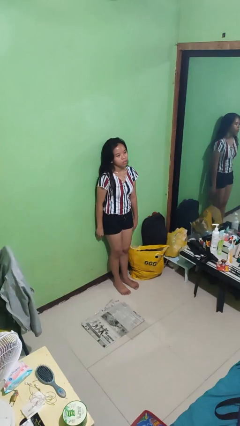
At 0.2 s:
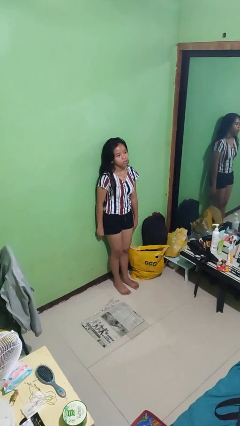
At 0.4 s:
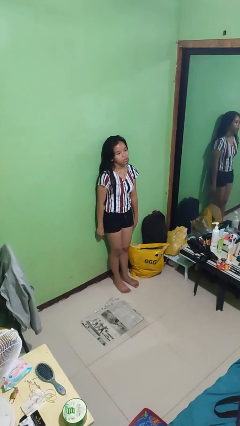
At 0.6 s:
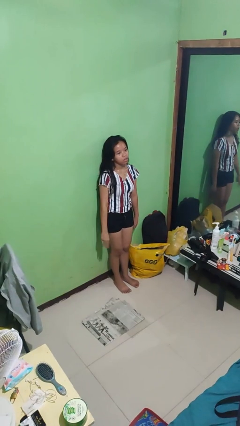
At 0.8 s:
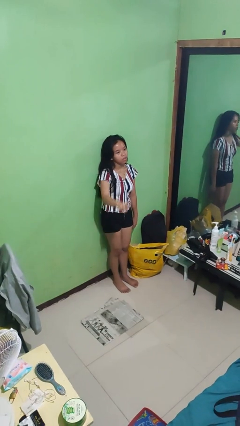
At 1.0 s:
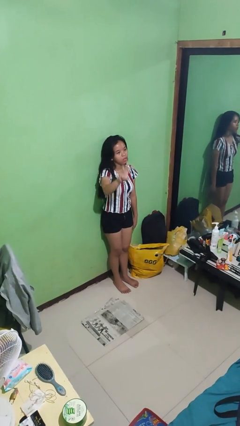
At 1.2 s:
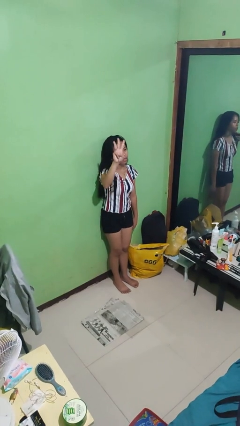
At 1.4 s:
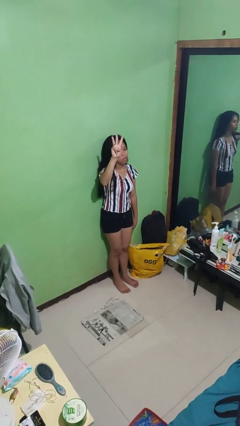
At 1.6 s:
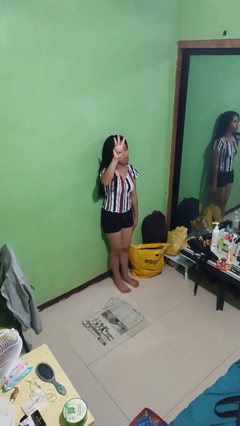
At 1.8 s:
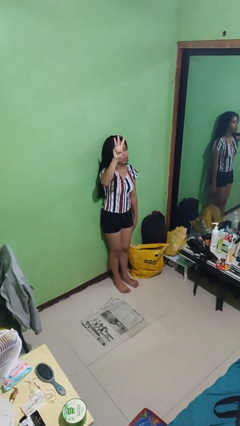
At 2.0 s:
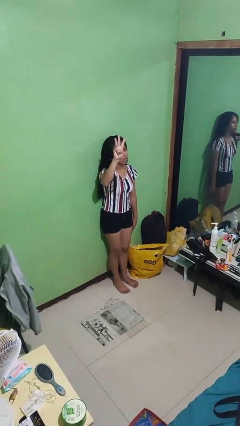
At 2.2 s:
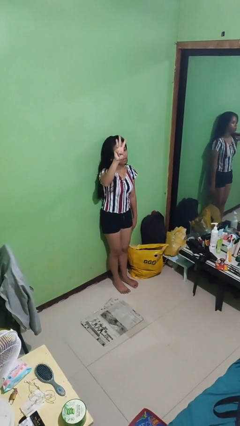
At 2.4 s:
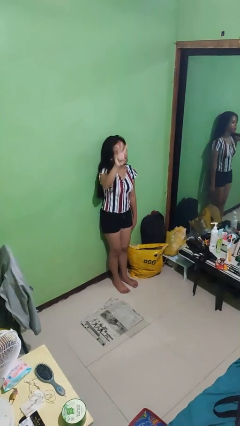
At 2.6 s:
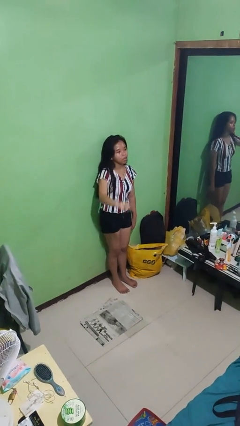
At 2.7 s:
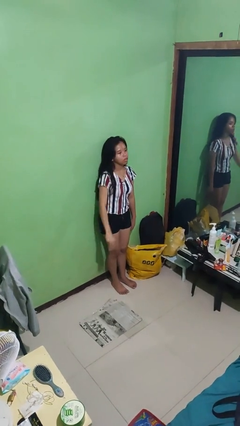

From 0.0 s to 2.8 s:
person gestures number three

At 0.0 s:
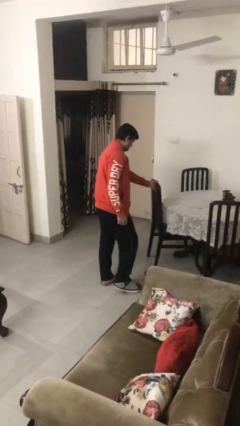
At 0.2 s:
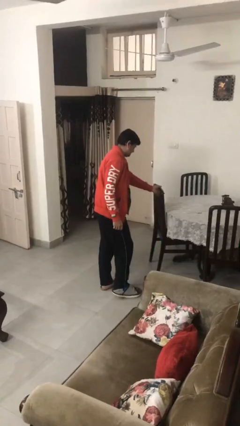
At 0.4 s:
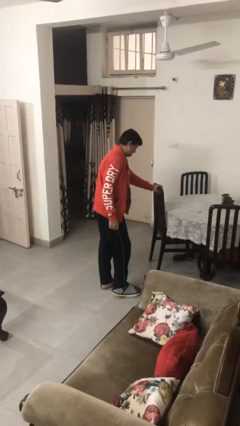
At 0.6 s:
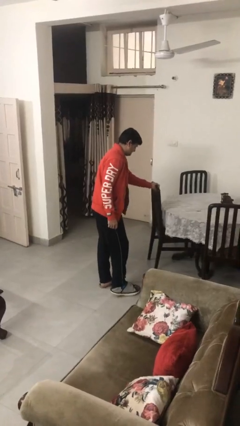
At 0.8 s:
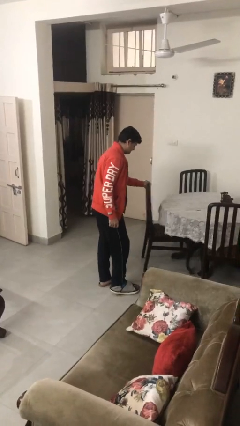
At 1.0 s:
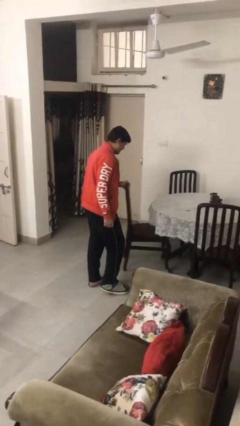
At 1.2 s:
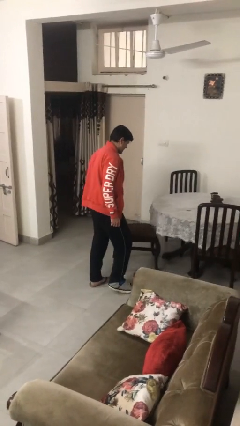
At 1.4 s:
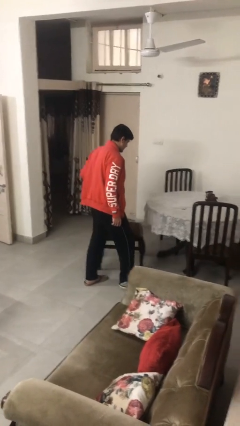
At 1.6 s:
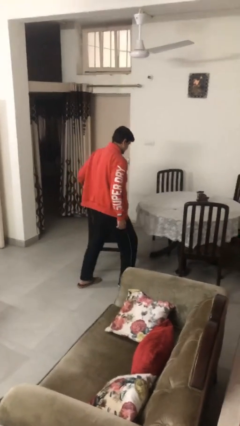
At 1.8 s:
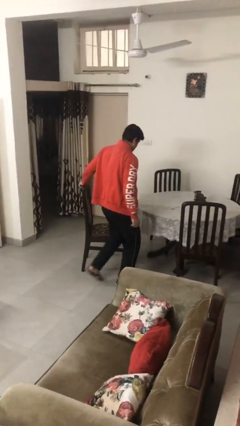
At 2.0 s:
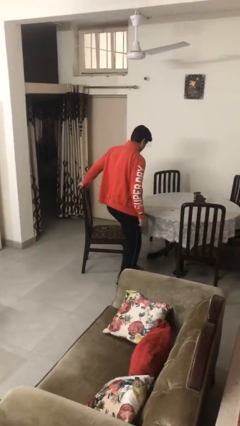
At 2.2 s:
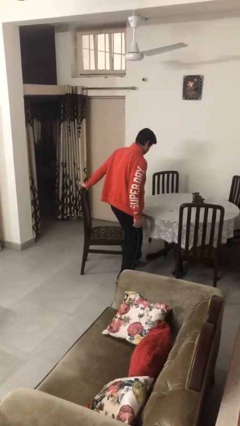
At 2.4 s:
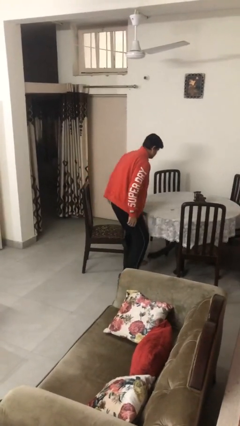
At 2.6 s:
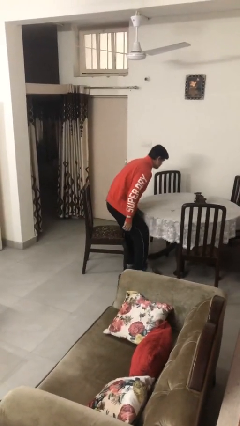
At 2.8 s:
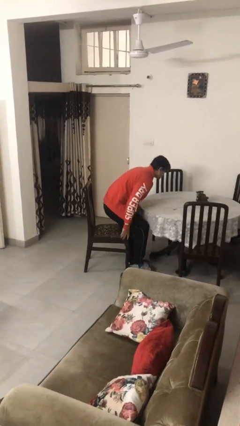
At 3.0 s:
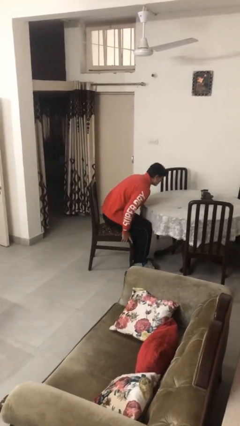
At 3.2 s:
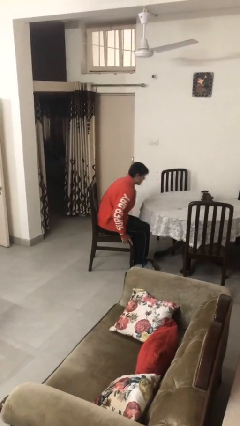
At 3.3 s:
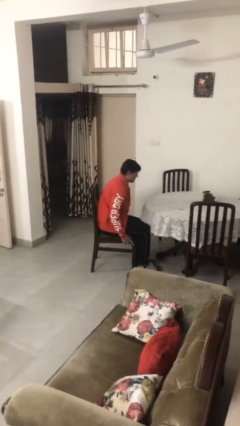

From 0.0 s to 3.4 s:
person sits down

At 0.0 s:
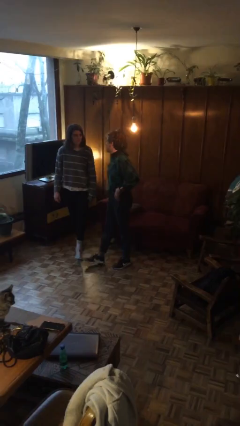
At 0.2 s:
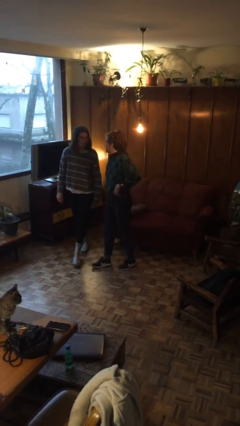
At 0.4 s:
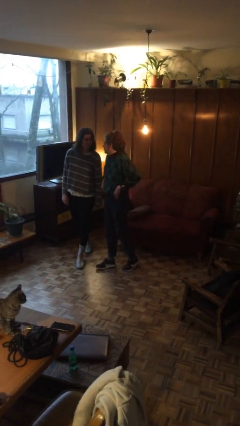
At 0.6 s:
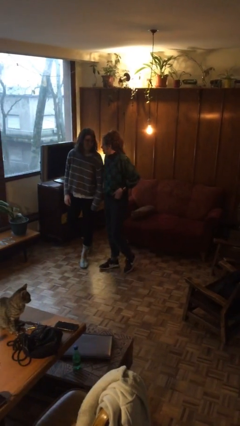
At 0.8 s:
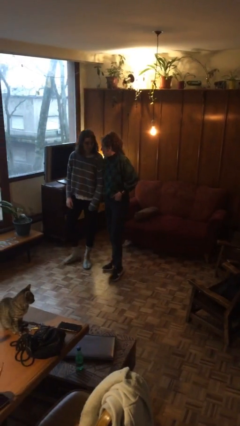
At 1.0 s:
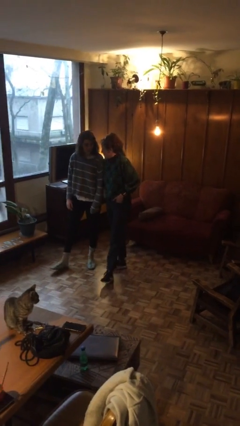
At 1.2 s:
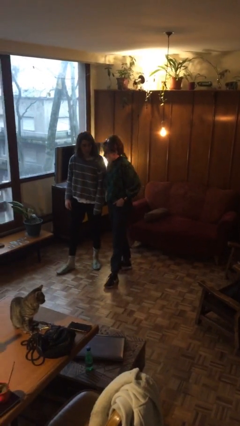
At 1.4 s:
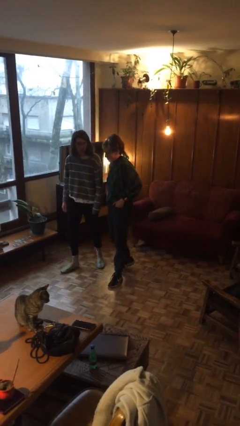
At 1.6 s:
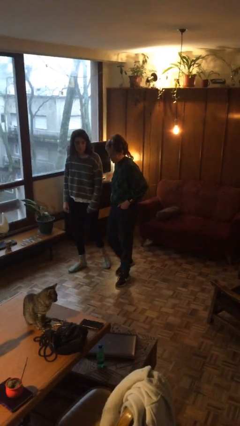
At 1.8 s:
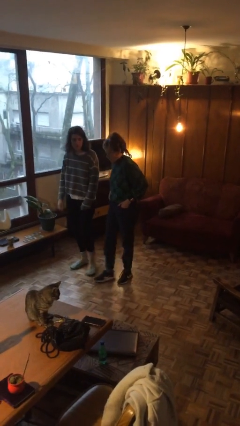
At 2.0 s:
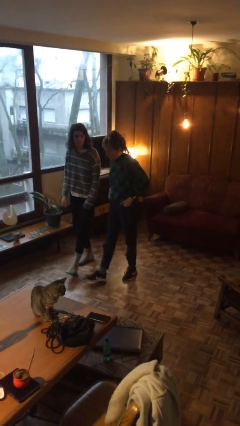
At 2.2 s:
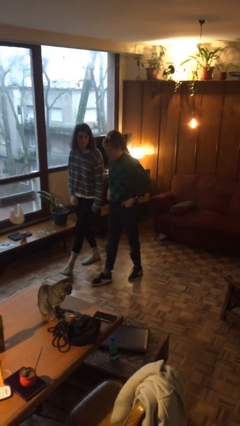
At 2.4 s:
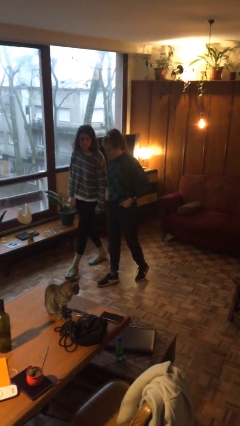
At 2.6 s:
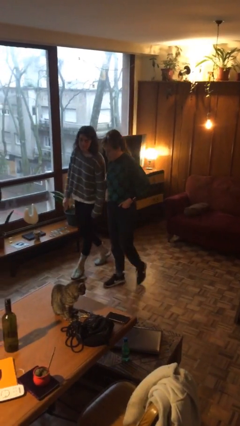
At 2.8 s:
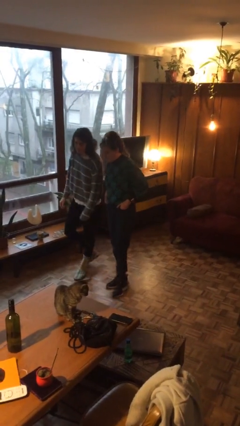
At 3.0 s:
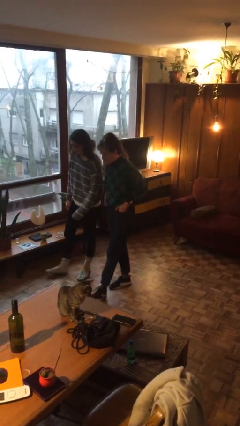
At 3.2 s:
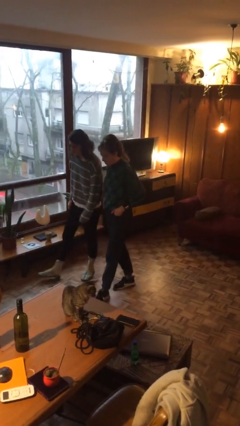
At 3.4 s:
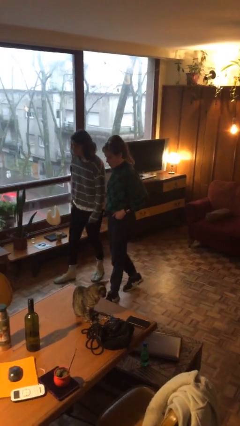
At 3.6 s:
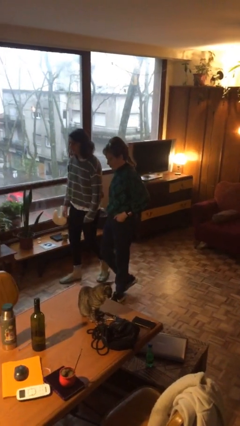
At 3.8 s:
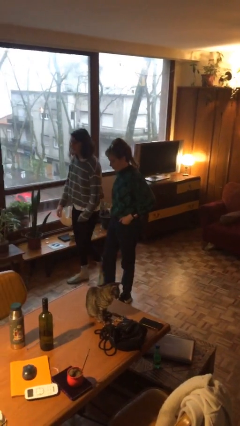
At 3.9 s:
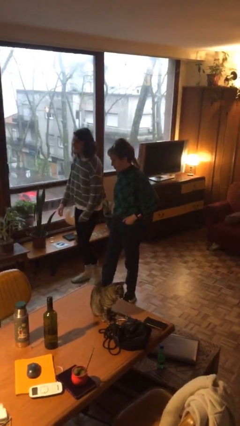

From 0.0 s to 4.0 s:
person talks to person

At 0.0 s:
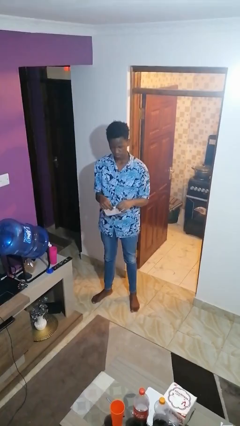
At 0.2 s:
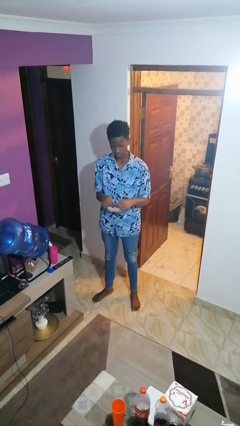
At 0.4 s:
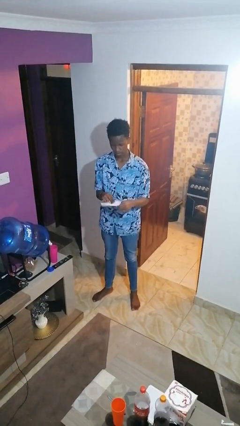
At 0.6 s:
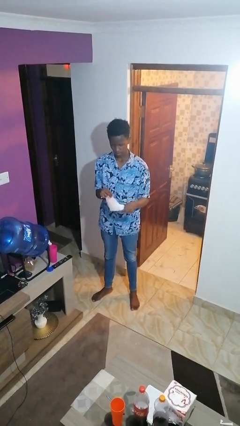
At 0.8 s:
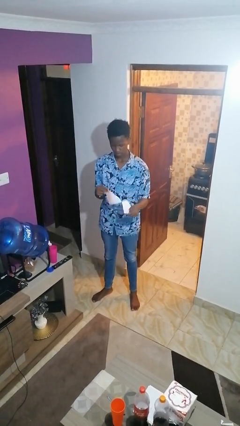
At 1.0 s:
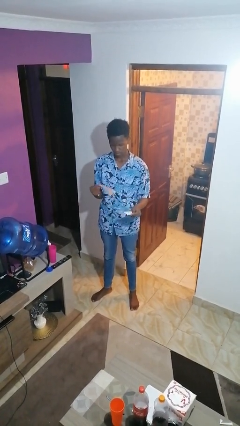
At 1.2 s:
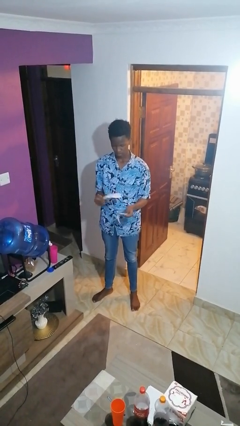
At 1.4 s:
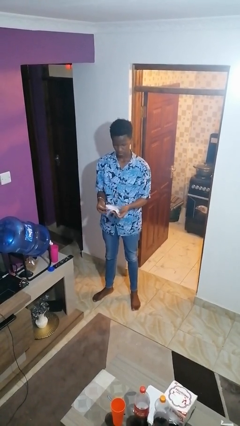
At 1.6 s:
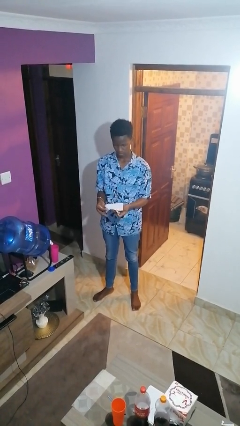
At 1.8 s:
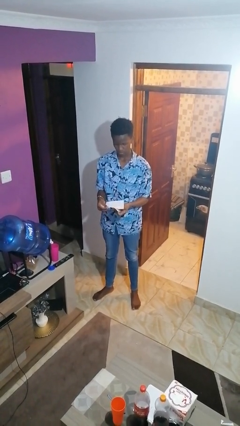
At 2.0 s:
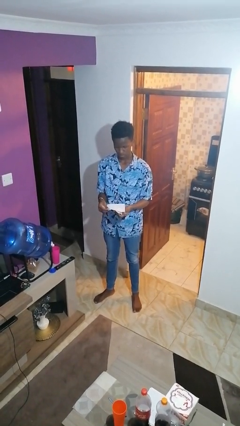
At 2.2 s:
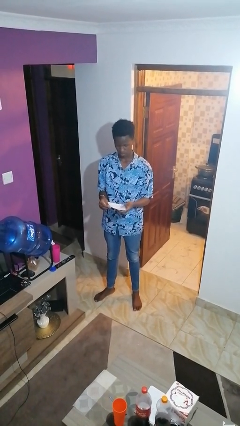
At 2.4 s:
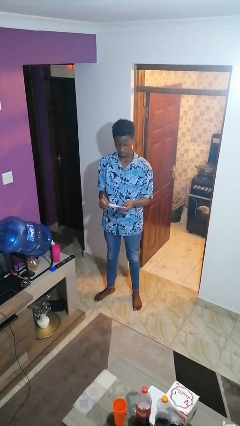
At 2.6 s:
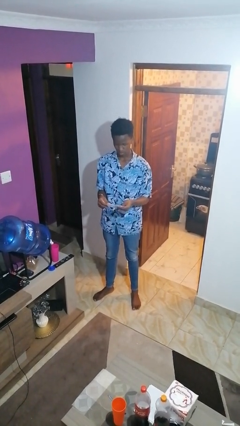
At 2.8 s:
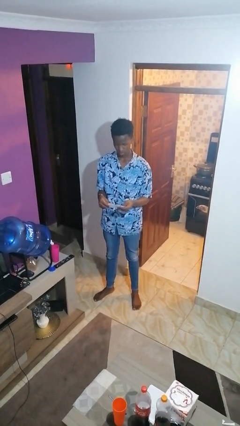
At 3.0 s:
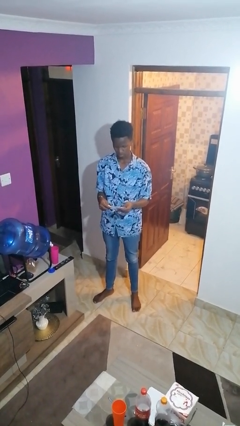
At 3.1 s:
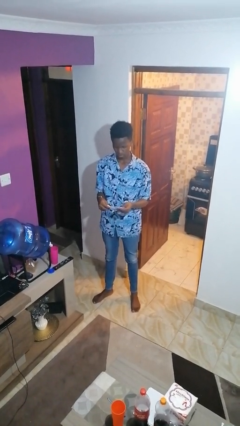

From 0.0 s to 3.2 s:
person tears paper

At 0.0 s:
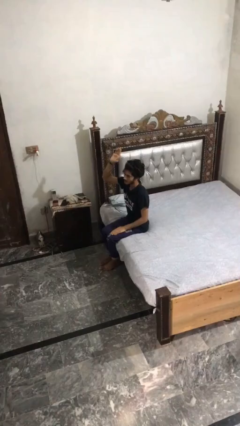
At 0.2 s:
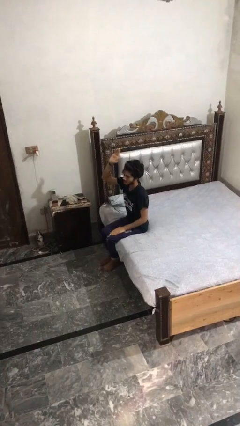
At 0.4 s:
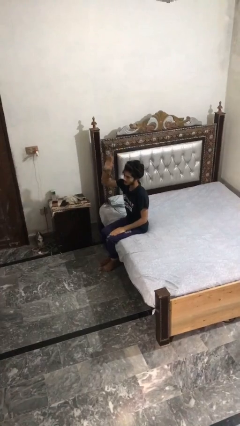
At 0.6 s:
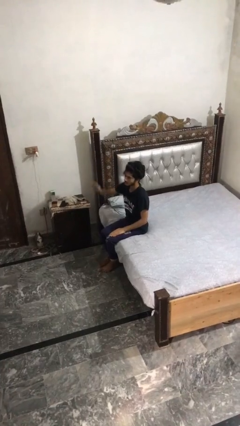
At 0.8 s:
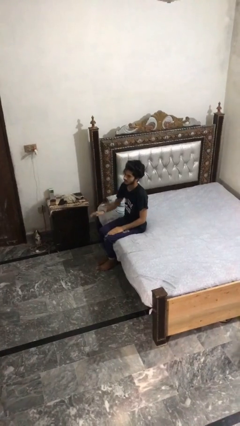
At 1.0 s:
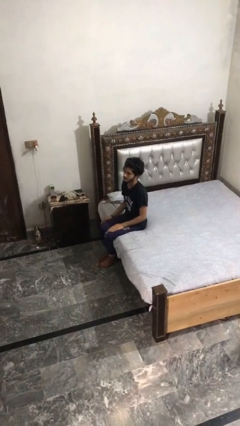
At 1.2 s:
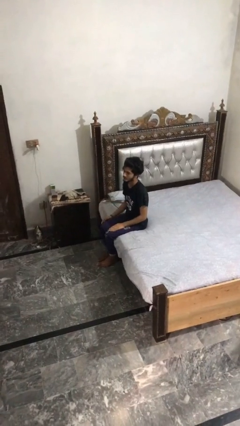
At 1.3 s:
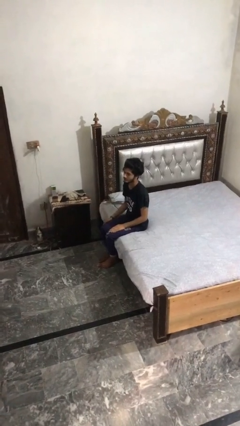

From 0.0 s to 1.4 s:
person gestures lower hand

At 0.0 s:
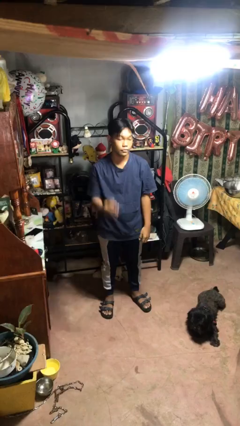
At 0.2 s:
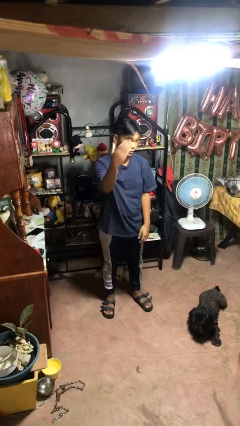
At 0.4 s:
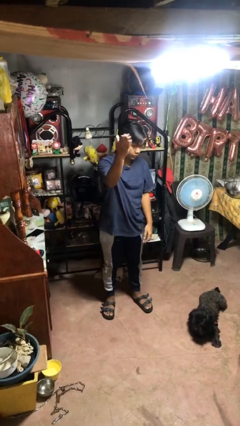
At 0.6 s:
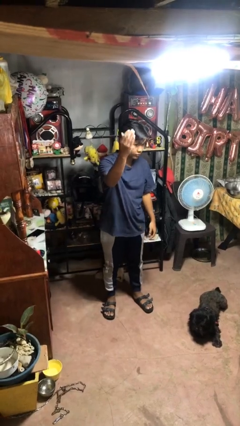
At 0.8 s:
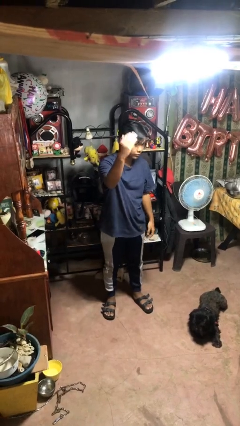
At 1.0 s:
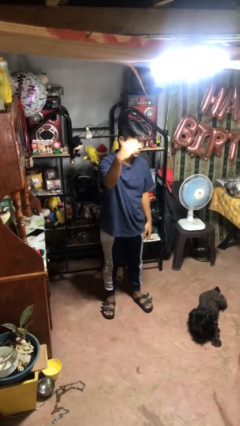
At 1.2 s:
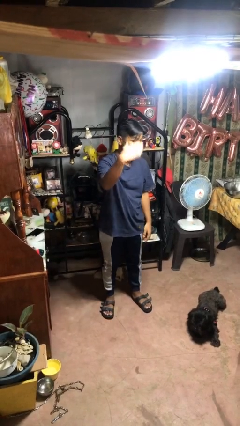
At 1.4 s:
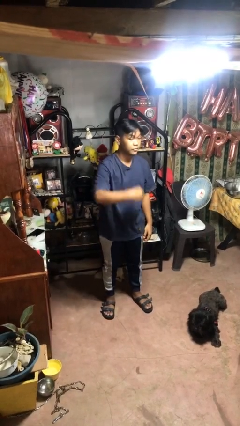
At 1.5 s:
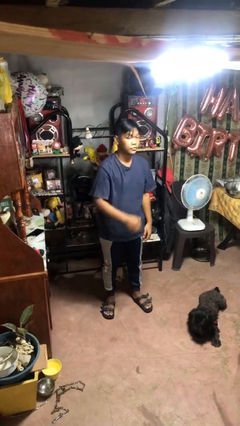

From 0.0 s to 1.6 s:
person gestures come here

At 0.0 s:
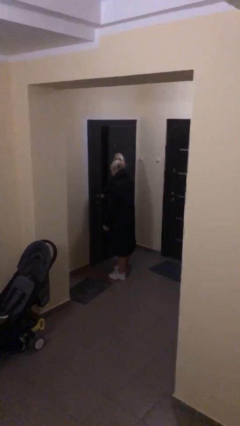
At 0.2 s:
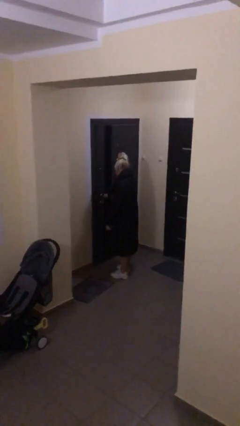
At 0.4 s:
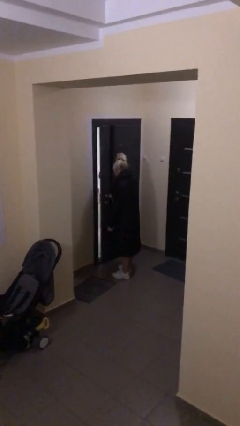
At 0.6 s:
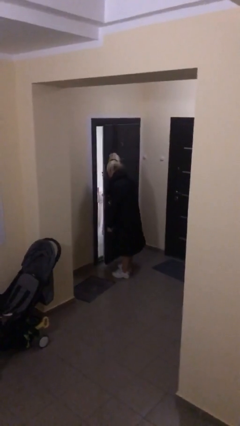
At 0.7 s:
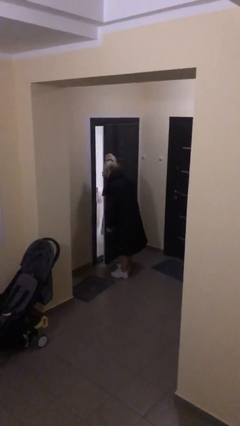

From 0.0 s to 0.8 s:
person opens facility door
